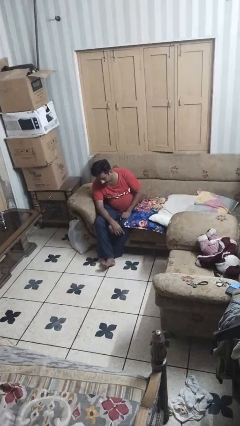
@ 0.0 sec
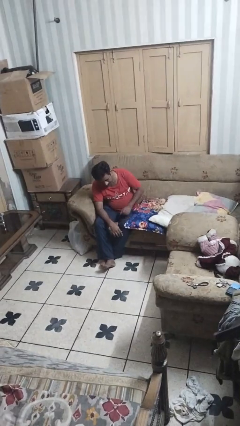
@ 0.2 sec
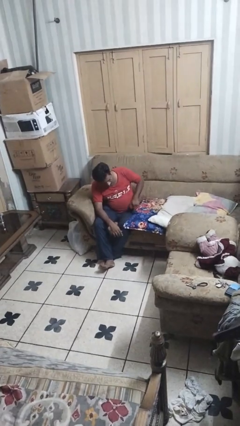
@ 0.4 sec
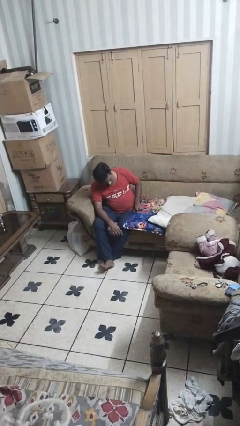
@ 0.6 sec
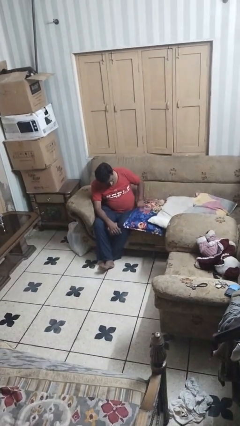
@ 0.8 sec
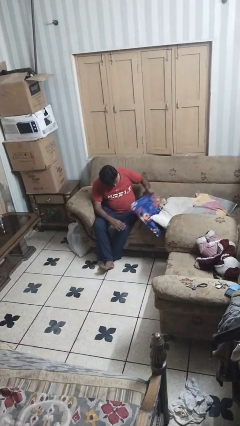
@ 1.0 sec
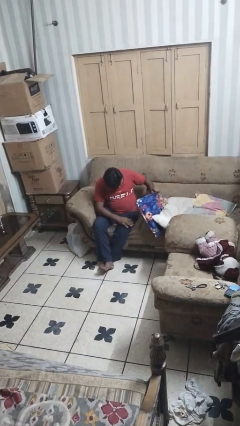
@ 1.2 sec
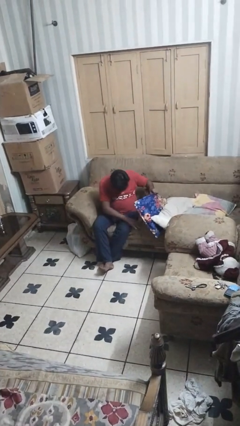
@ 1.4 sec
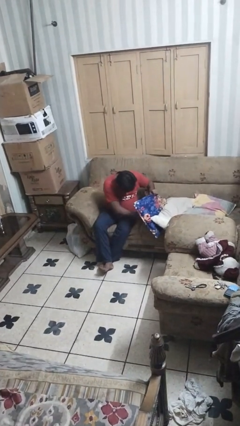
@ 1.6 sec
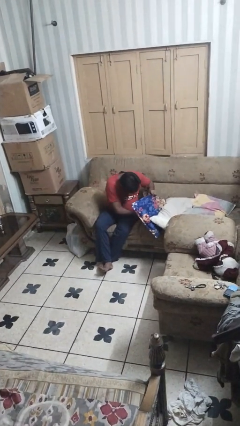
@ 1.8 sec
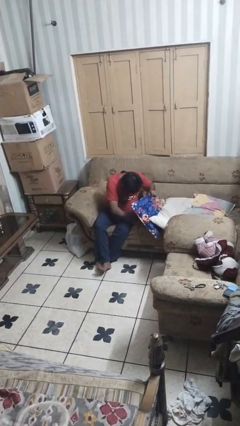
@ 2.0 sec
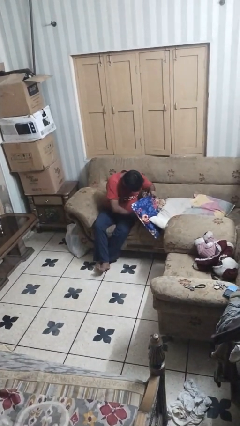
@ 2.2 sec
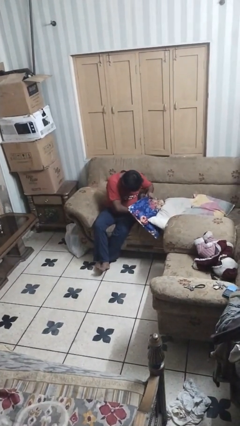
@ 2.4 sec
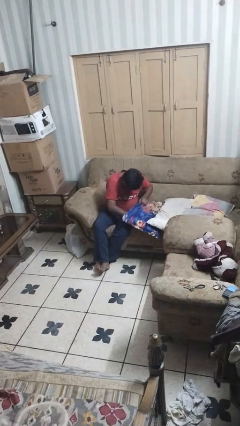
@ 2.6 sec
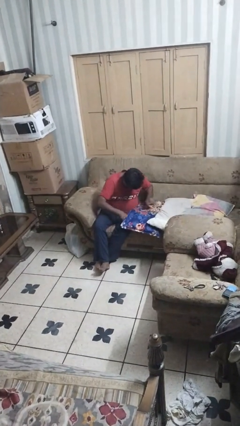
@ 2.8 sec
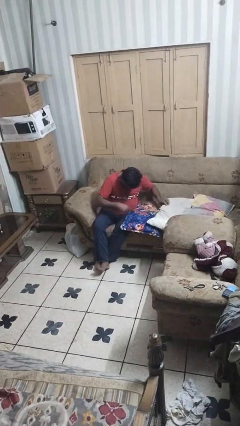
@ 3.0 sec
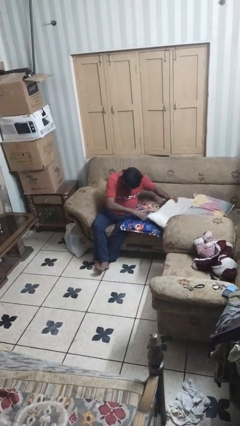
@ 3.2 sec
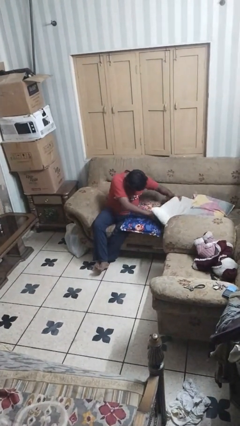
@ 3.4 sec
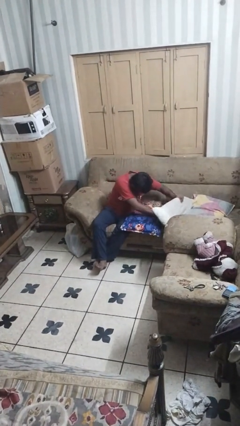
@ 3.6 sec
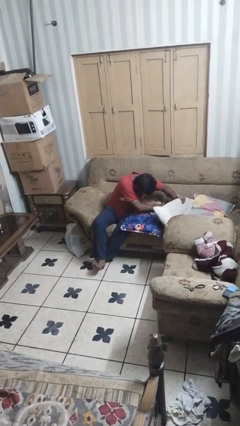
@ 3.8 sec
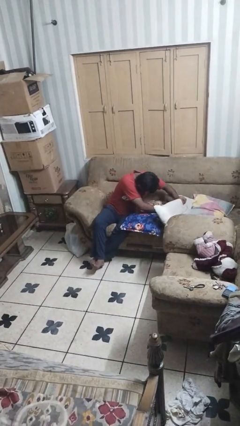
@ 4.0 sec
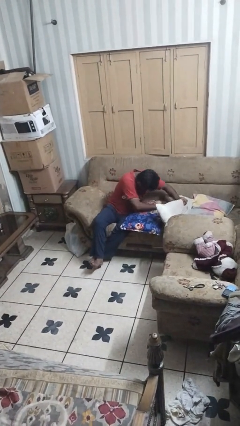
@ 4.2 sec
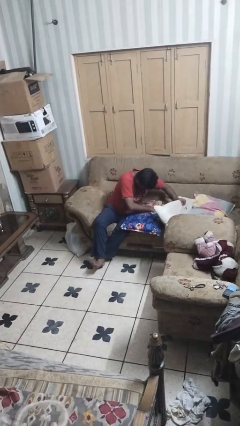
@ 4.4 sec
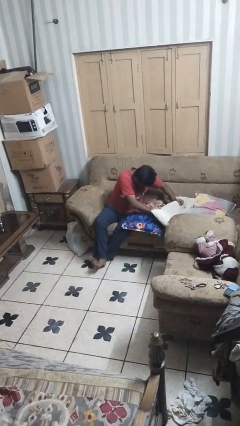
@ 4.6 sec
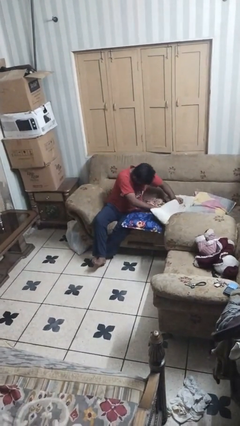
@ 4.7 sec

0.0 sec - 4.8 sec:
person searches in couch

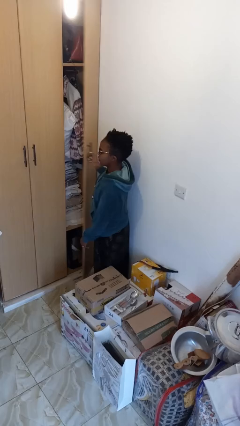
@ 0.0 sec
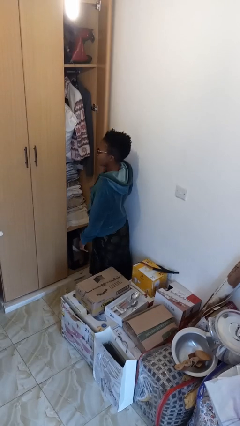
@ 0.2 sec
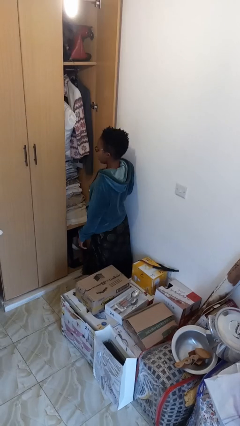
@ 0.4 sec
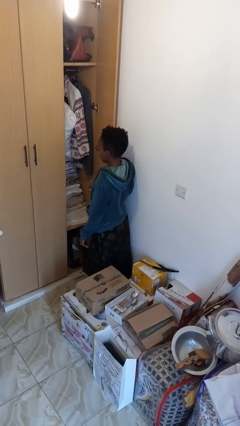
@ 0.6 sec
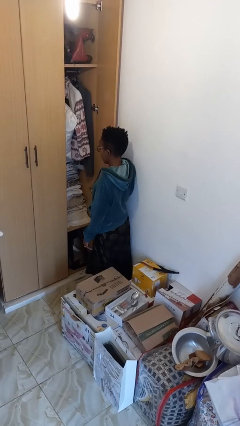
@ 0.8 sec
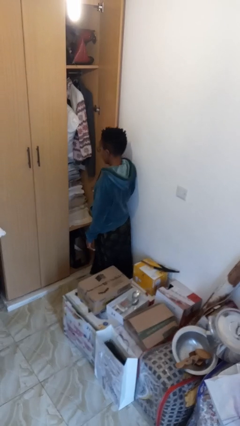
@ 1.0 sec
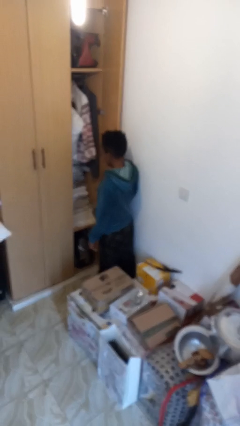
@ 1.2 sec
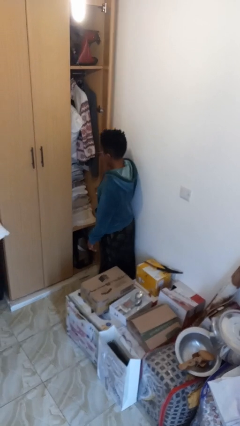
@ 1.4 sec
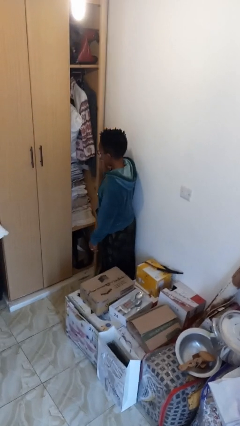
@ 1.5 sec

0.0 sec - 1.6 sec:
person opens closet door

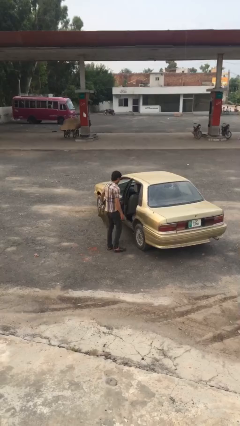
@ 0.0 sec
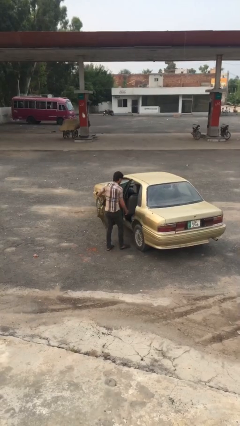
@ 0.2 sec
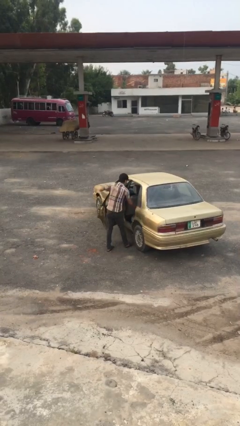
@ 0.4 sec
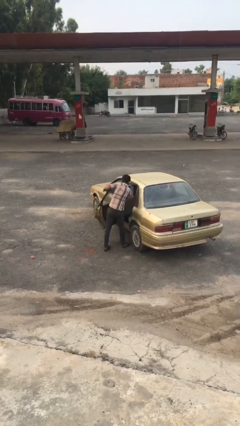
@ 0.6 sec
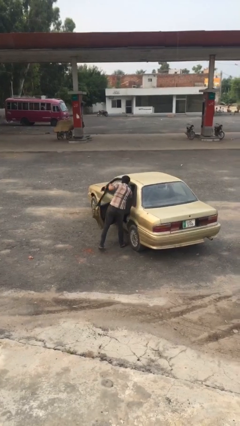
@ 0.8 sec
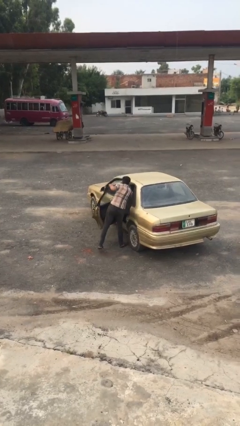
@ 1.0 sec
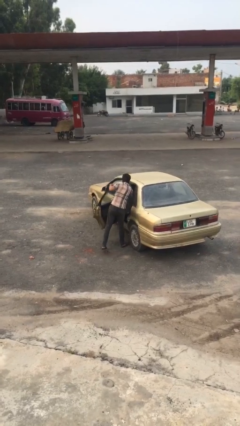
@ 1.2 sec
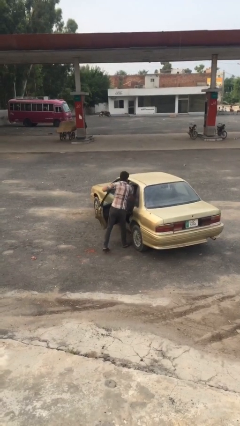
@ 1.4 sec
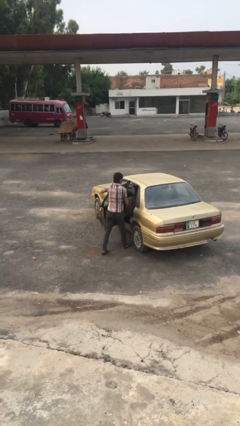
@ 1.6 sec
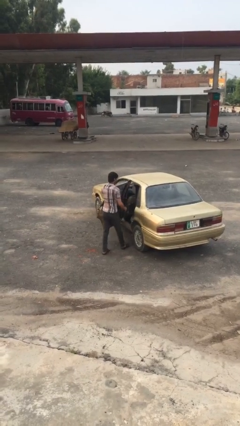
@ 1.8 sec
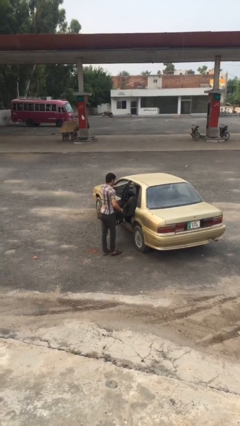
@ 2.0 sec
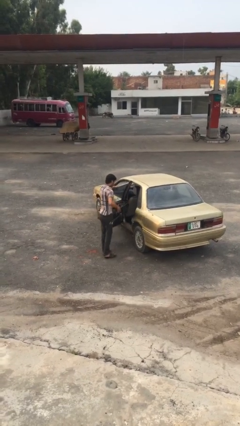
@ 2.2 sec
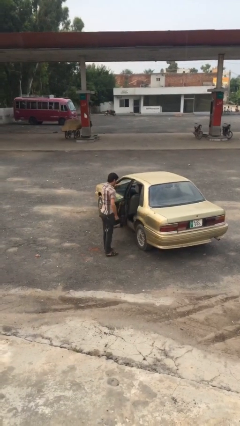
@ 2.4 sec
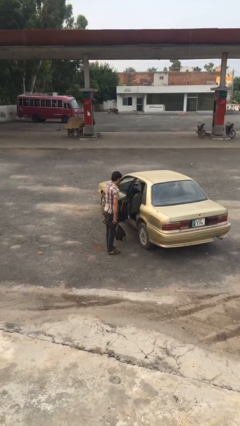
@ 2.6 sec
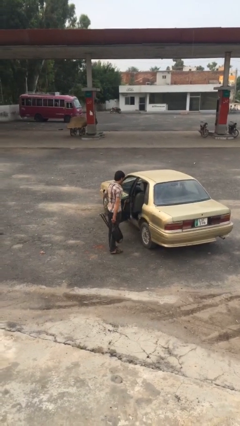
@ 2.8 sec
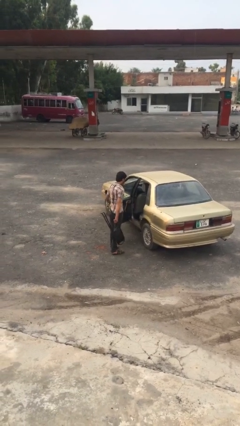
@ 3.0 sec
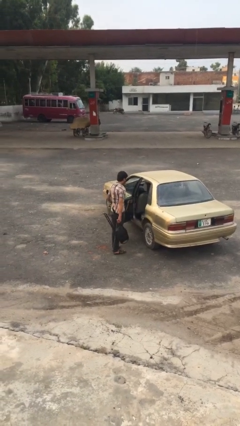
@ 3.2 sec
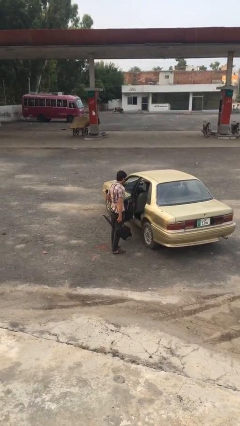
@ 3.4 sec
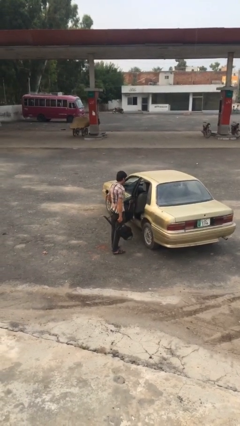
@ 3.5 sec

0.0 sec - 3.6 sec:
person unloads car

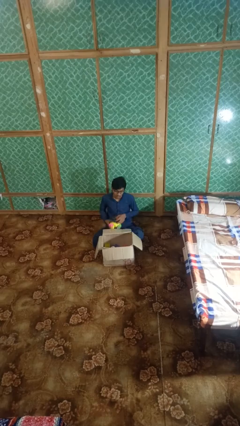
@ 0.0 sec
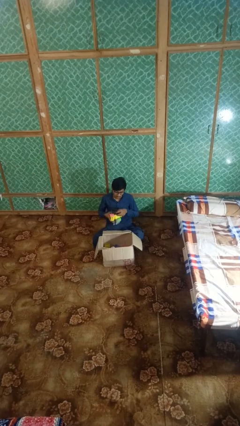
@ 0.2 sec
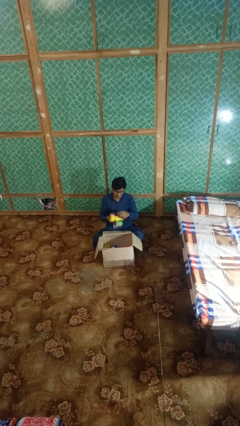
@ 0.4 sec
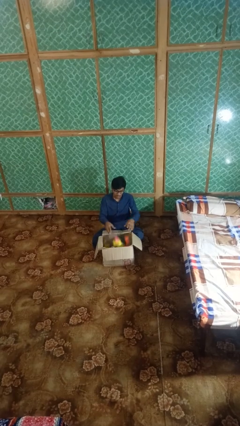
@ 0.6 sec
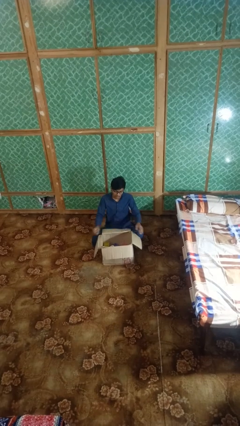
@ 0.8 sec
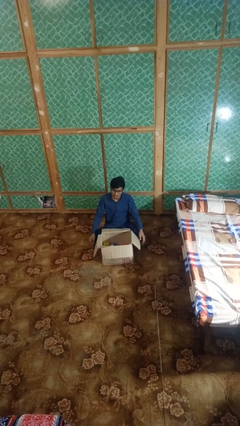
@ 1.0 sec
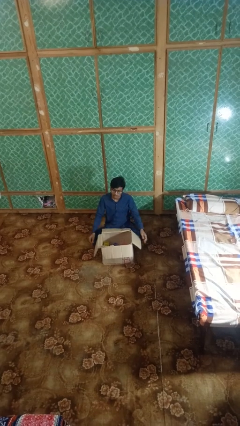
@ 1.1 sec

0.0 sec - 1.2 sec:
person puts object into box

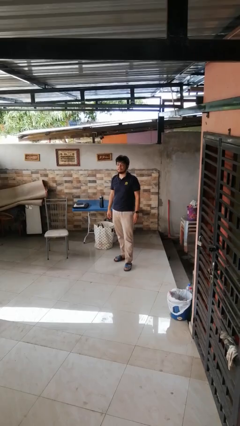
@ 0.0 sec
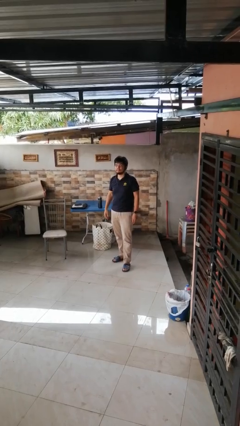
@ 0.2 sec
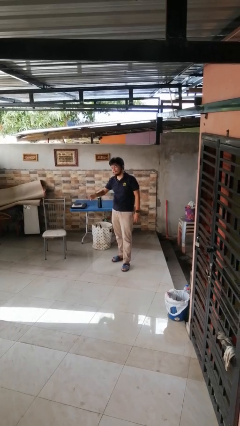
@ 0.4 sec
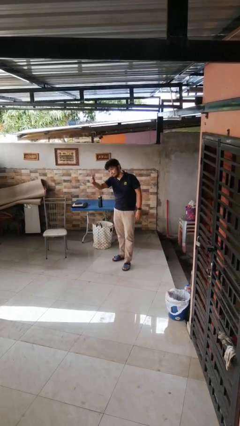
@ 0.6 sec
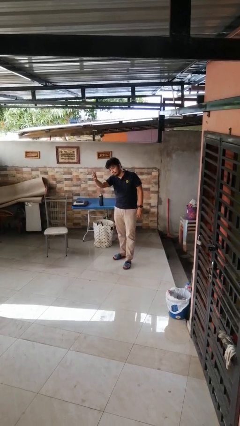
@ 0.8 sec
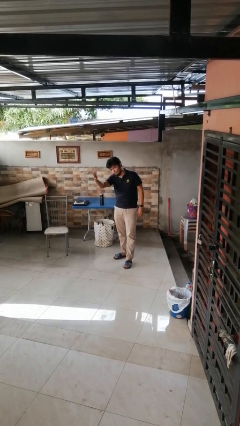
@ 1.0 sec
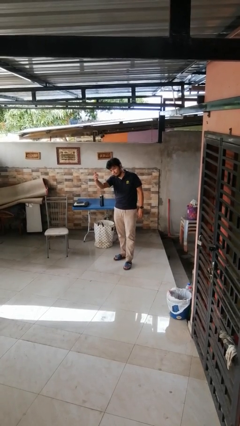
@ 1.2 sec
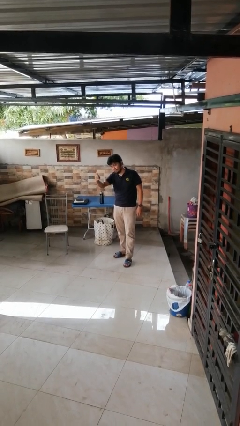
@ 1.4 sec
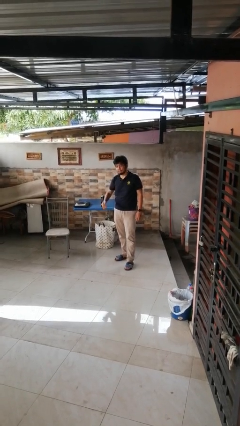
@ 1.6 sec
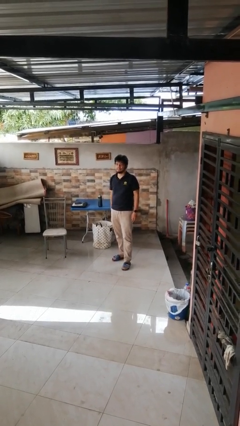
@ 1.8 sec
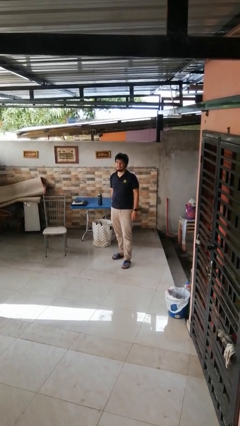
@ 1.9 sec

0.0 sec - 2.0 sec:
person gestures come here

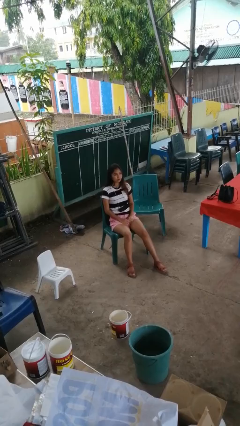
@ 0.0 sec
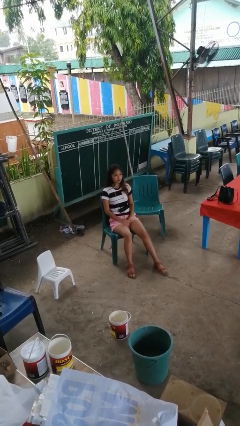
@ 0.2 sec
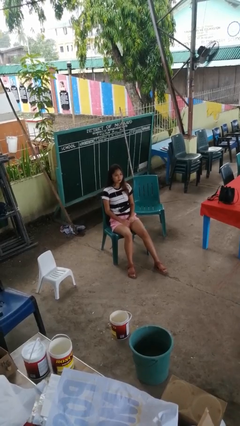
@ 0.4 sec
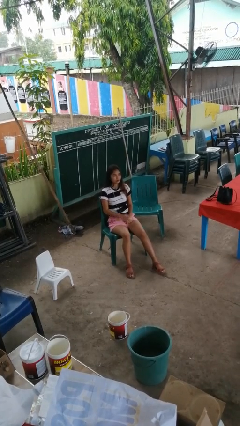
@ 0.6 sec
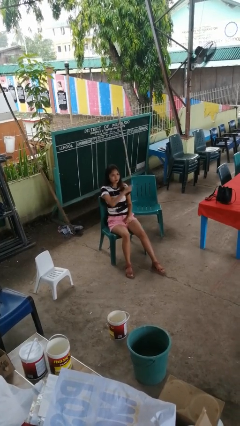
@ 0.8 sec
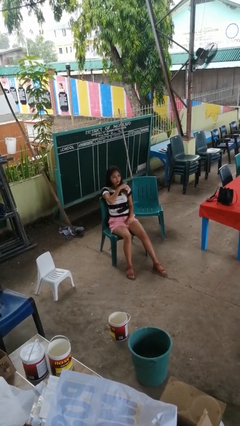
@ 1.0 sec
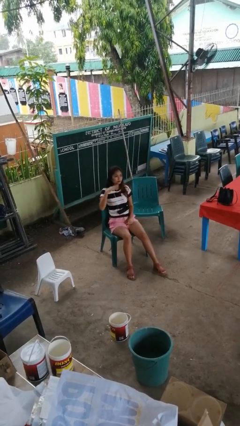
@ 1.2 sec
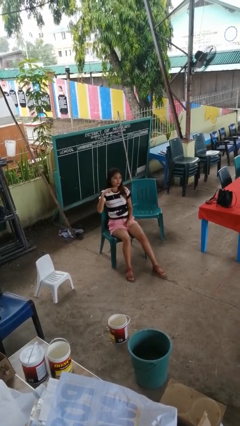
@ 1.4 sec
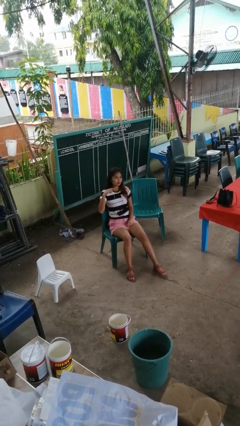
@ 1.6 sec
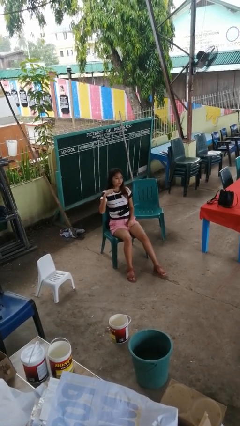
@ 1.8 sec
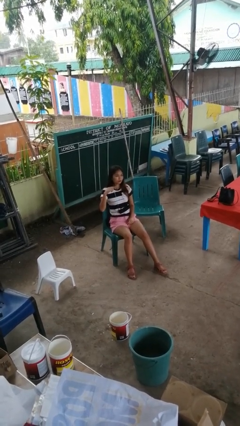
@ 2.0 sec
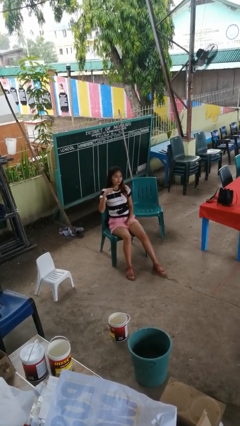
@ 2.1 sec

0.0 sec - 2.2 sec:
person gestures cut

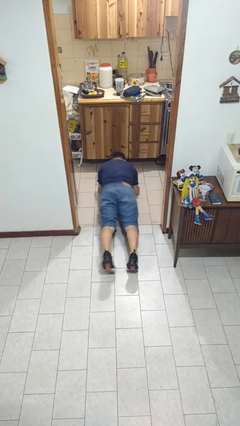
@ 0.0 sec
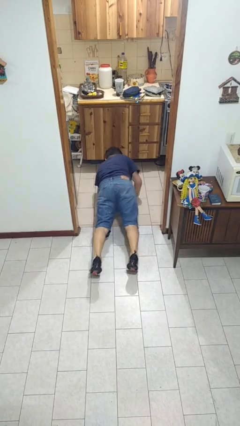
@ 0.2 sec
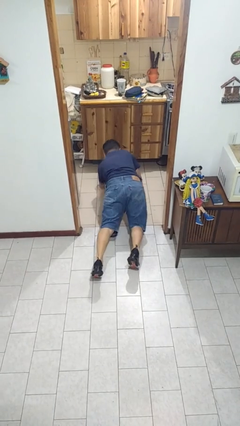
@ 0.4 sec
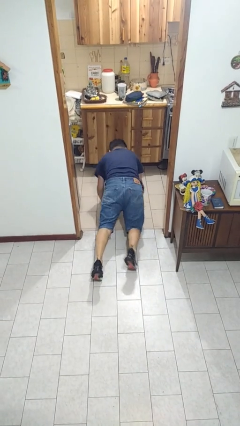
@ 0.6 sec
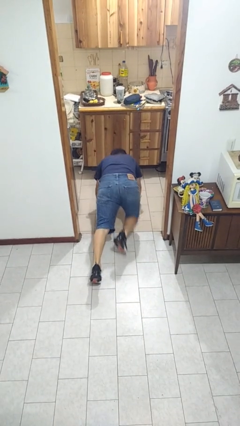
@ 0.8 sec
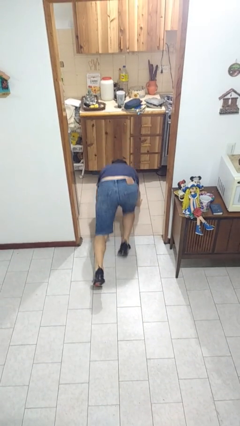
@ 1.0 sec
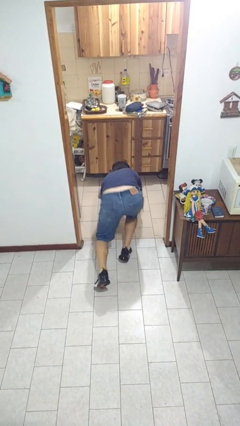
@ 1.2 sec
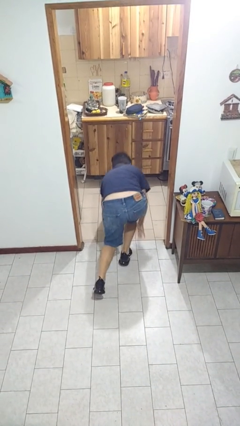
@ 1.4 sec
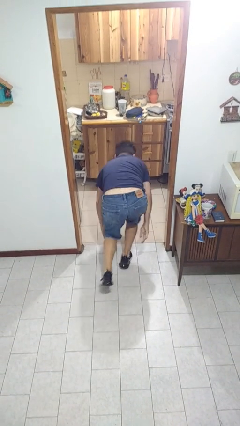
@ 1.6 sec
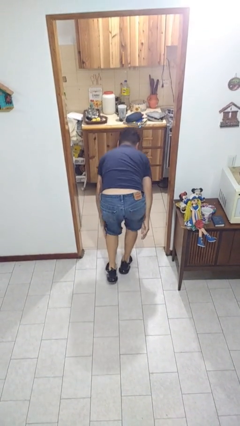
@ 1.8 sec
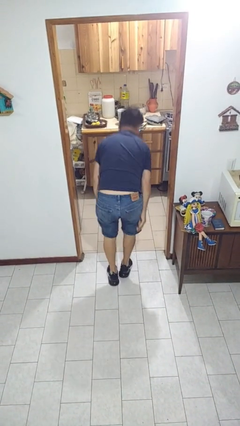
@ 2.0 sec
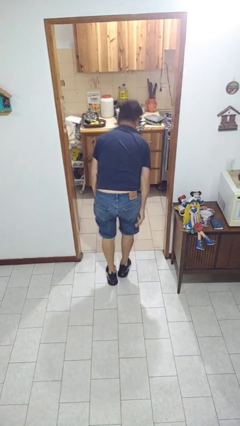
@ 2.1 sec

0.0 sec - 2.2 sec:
person stands up from floor
